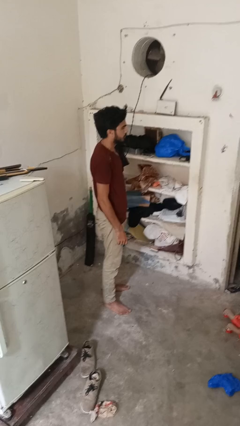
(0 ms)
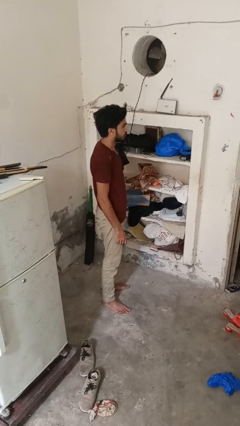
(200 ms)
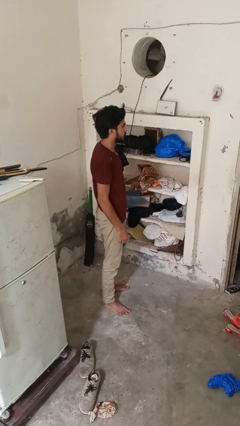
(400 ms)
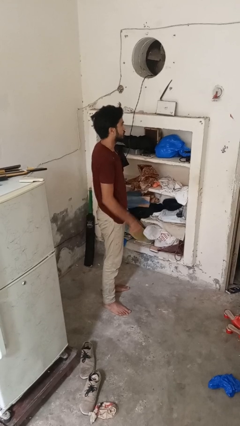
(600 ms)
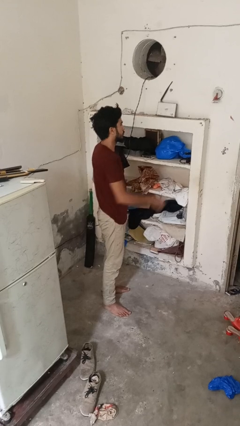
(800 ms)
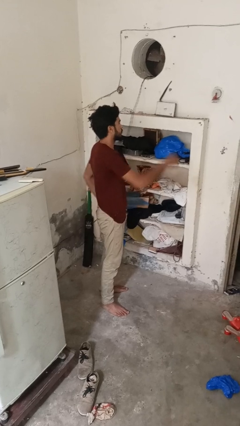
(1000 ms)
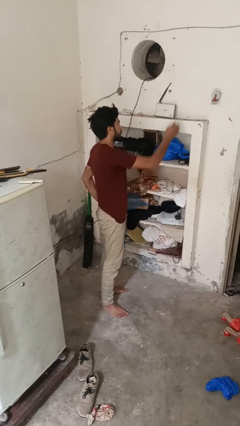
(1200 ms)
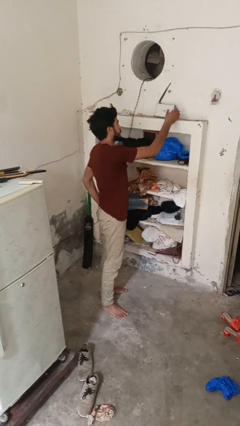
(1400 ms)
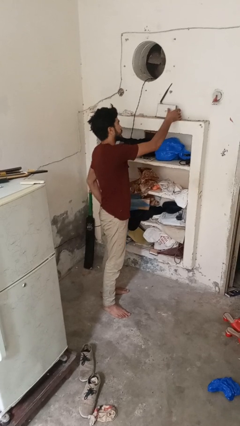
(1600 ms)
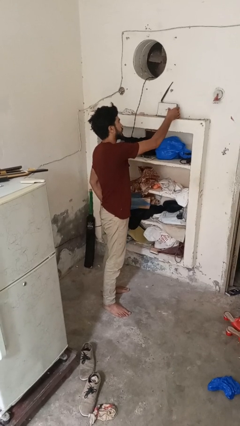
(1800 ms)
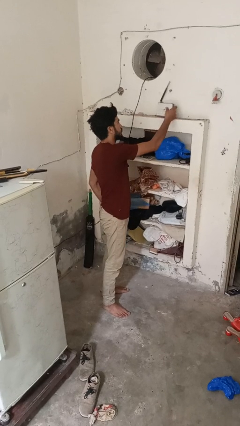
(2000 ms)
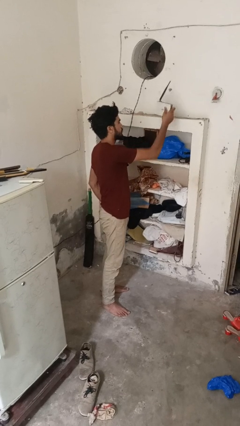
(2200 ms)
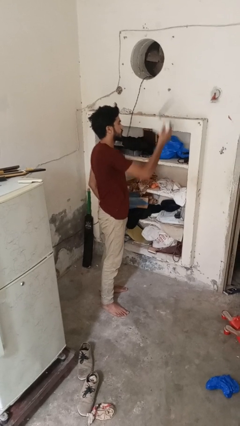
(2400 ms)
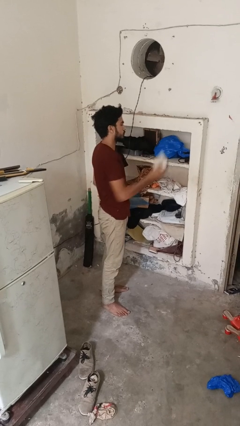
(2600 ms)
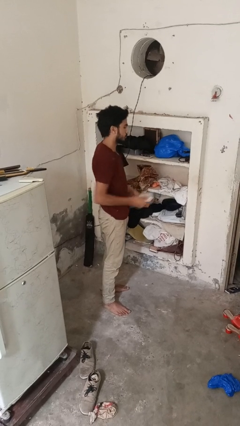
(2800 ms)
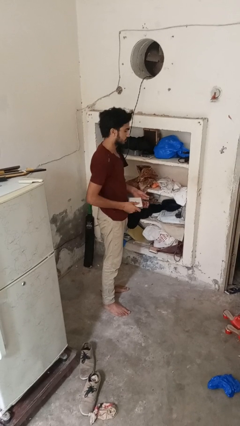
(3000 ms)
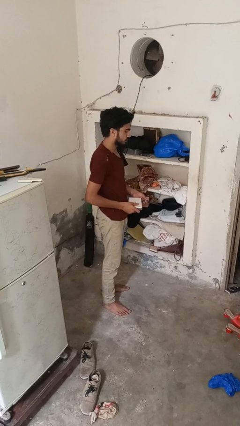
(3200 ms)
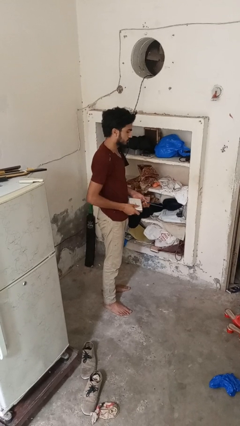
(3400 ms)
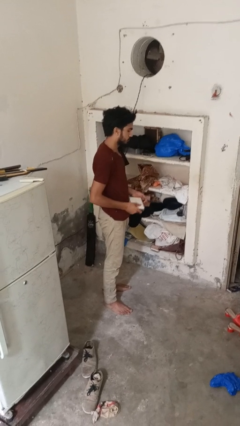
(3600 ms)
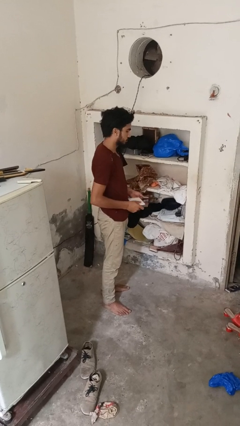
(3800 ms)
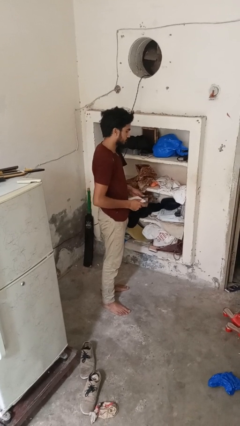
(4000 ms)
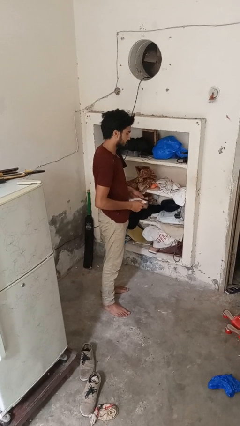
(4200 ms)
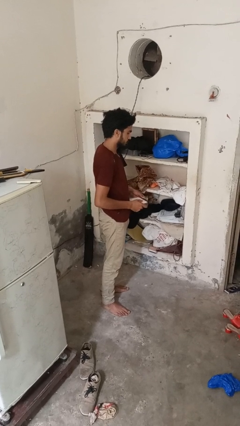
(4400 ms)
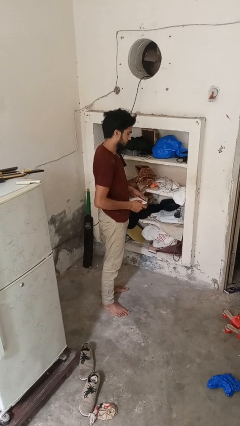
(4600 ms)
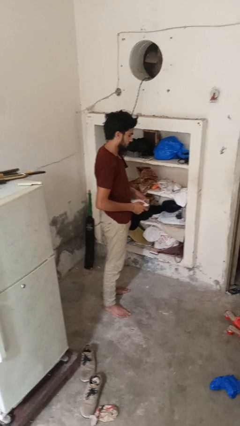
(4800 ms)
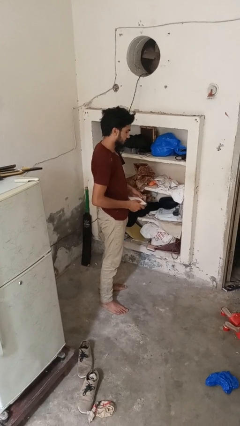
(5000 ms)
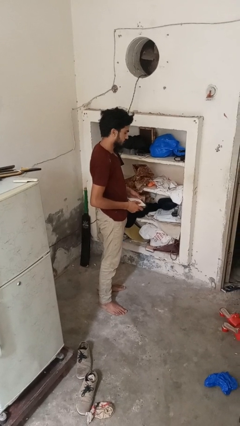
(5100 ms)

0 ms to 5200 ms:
person picks up object from shelf

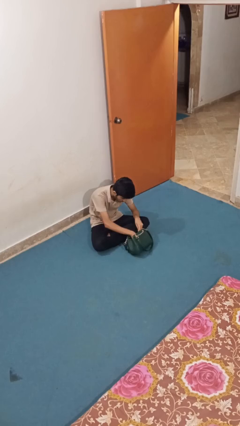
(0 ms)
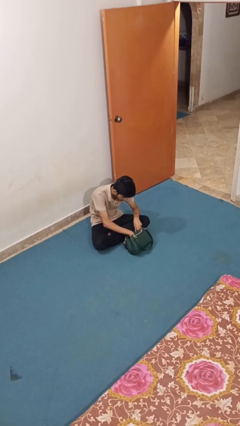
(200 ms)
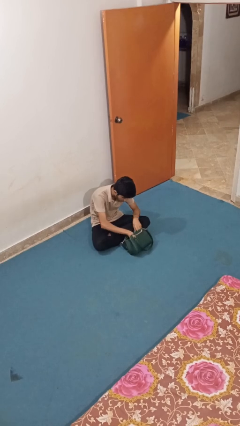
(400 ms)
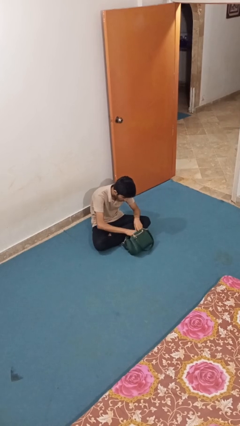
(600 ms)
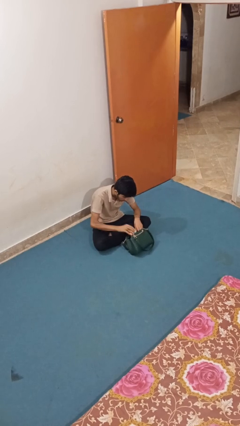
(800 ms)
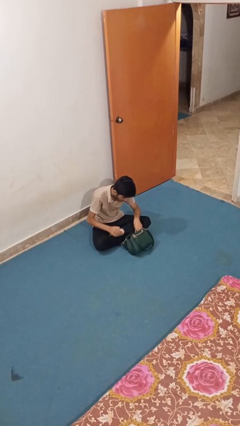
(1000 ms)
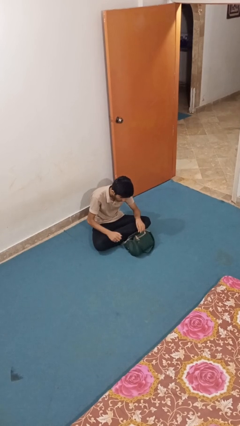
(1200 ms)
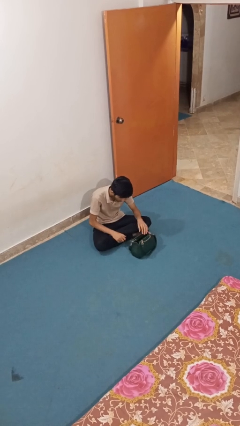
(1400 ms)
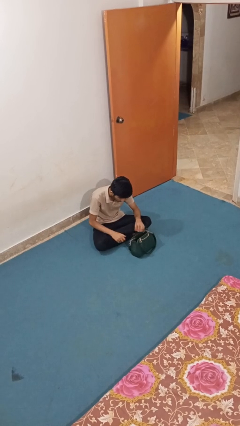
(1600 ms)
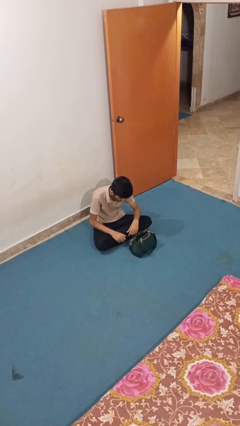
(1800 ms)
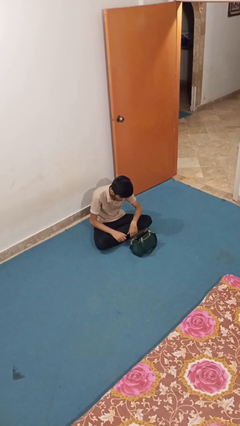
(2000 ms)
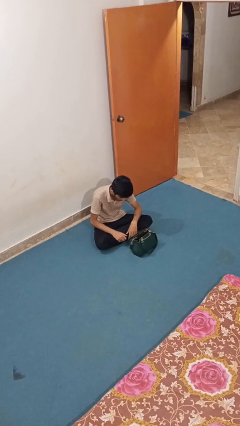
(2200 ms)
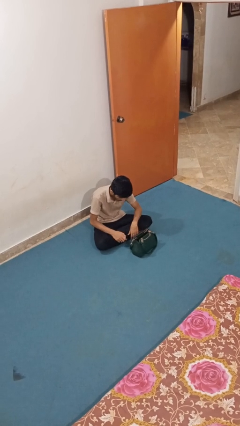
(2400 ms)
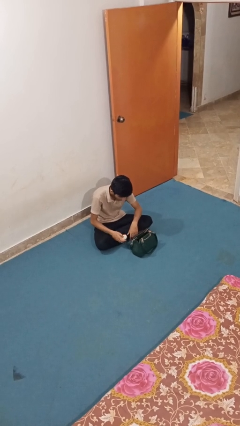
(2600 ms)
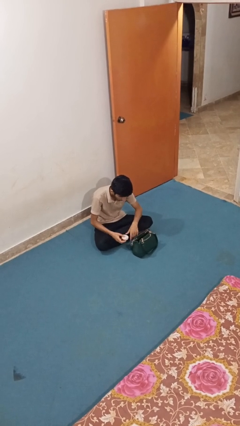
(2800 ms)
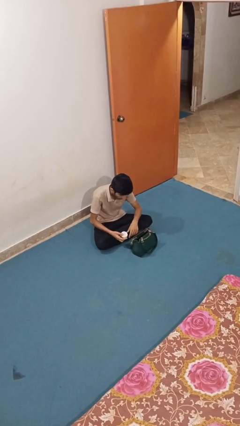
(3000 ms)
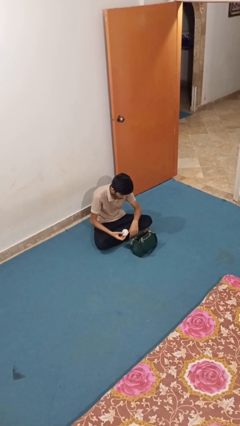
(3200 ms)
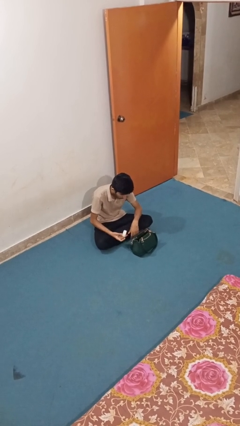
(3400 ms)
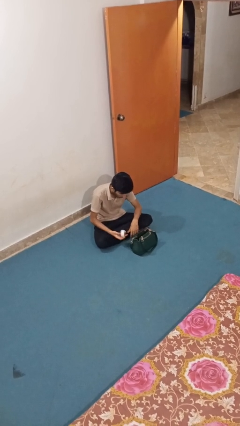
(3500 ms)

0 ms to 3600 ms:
person takes object from purse

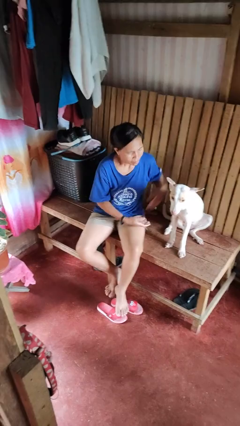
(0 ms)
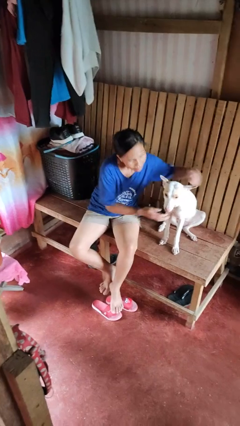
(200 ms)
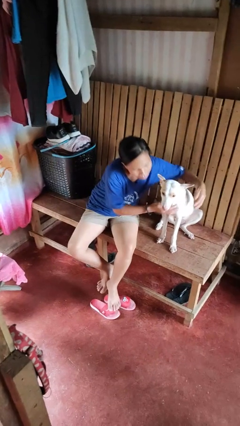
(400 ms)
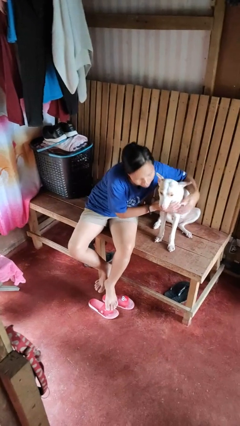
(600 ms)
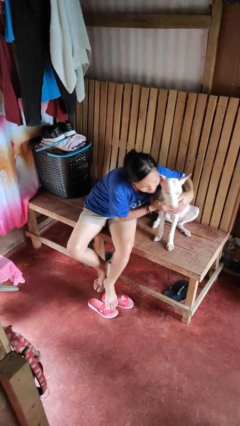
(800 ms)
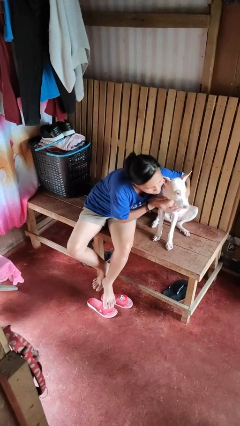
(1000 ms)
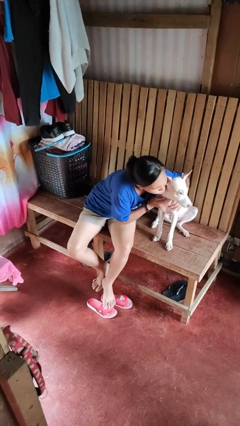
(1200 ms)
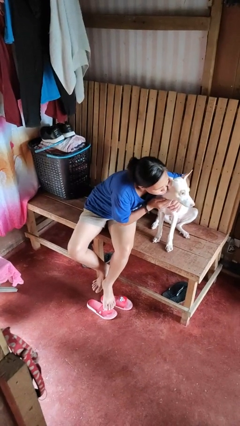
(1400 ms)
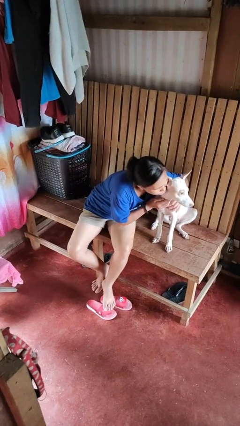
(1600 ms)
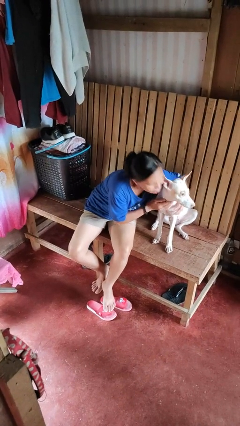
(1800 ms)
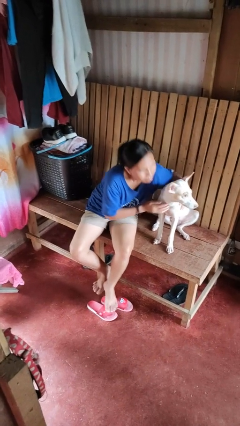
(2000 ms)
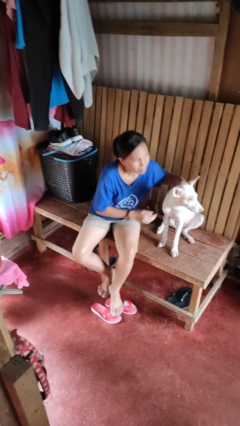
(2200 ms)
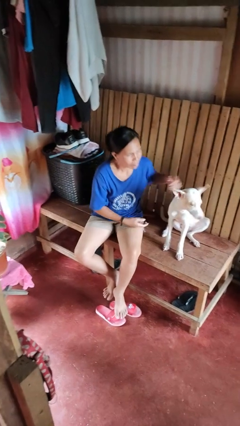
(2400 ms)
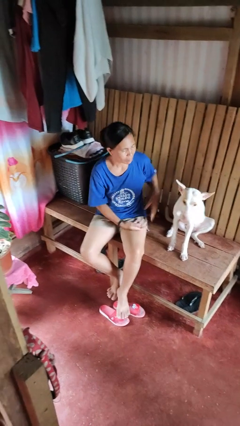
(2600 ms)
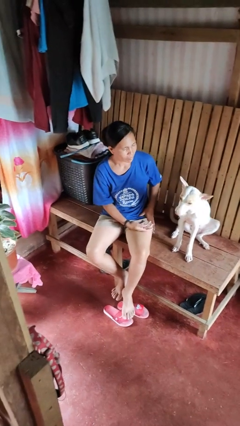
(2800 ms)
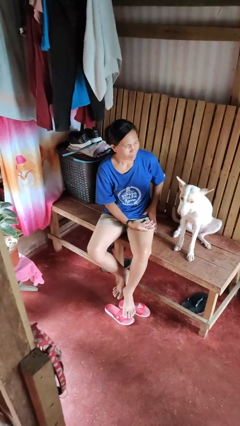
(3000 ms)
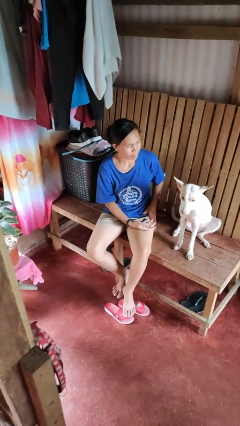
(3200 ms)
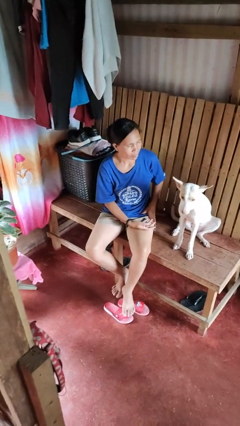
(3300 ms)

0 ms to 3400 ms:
person hugs dog

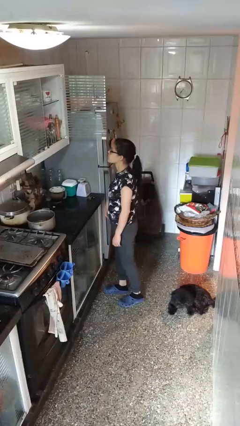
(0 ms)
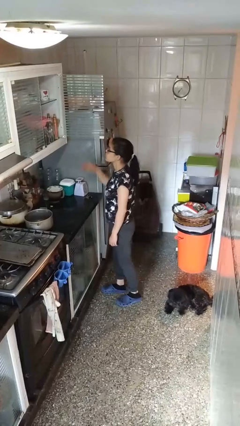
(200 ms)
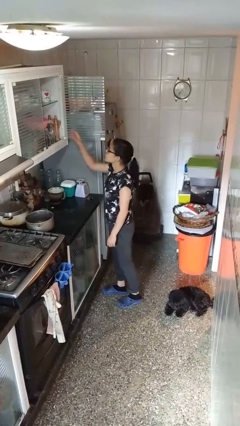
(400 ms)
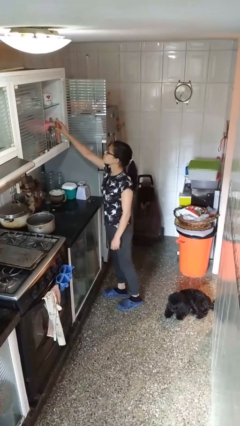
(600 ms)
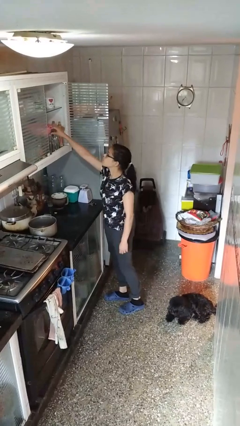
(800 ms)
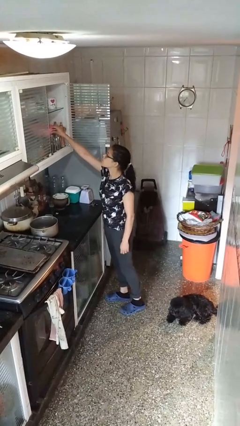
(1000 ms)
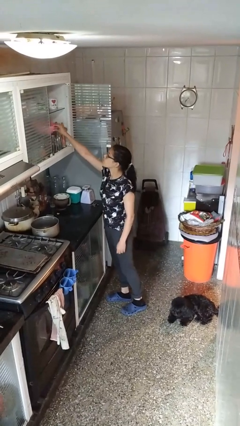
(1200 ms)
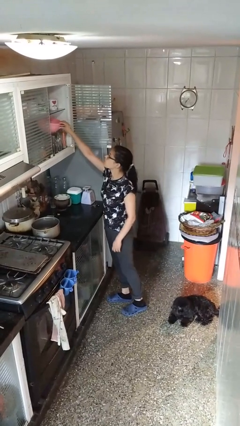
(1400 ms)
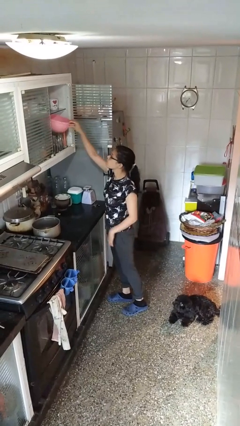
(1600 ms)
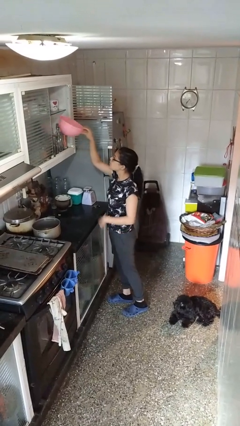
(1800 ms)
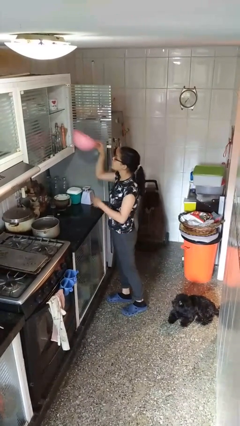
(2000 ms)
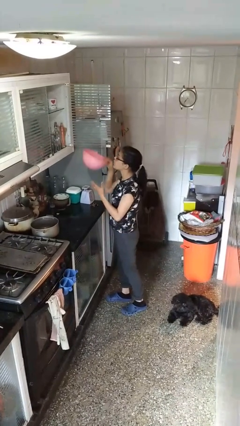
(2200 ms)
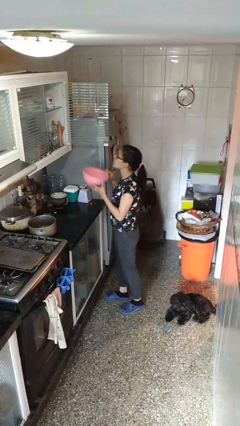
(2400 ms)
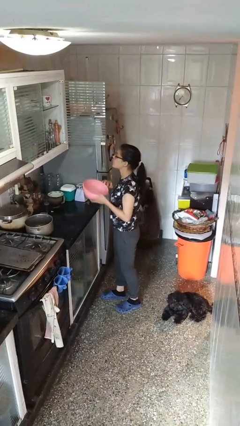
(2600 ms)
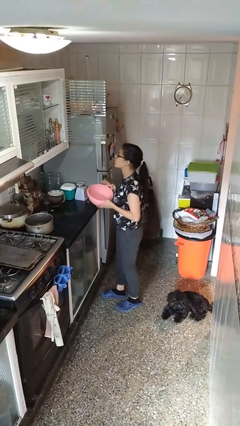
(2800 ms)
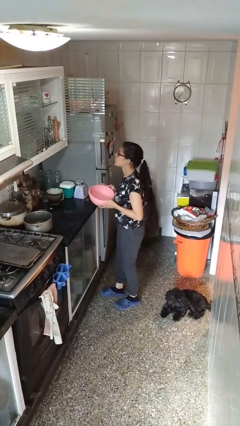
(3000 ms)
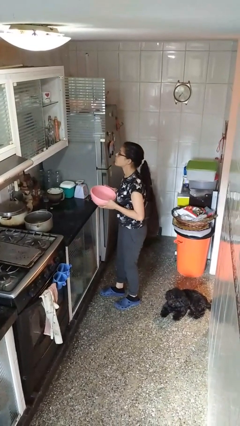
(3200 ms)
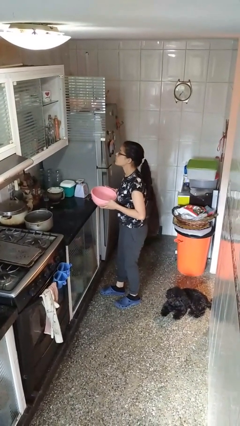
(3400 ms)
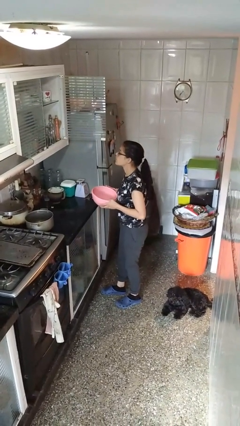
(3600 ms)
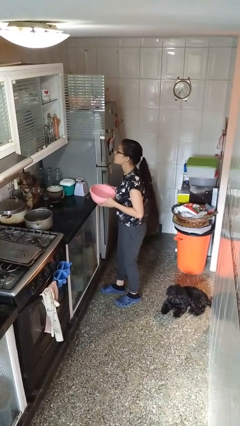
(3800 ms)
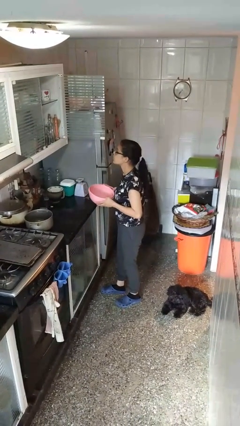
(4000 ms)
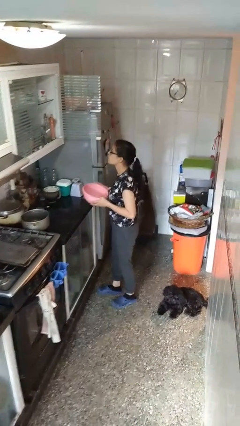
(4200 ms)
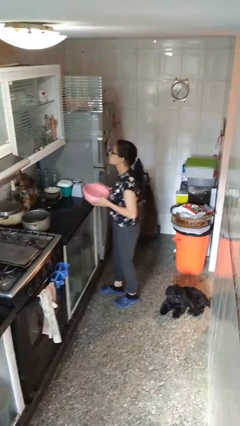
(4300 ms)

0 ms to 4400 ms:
person picks up object from cabinet

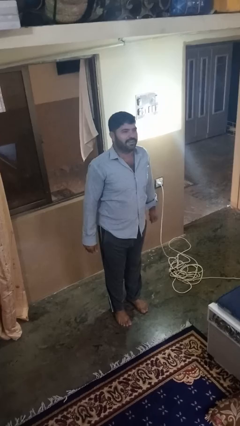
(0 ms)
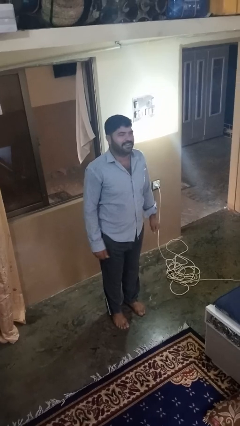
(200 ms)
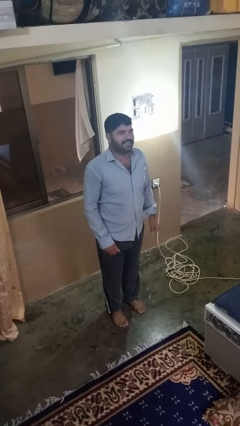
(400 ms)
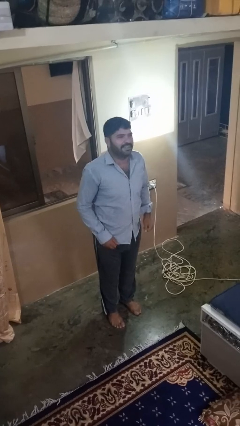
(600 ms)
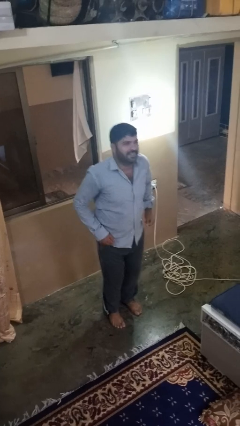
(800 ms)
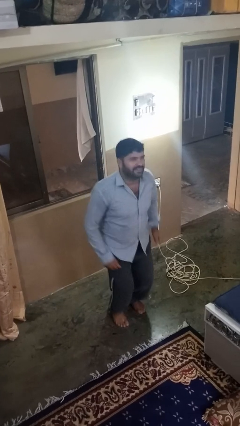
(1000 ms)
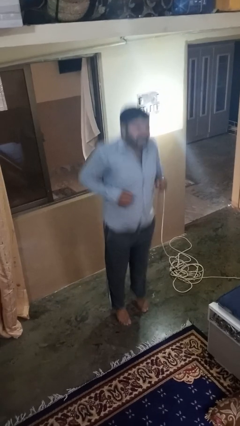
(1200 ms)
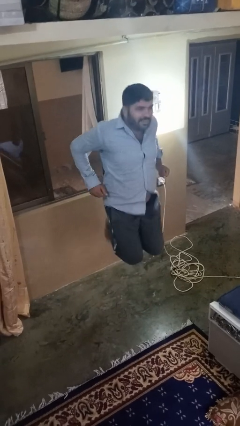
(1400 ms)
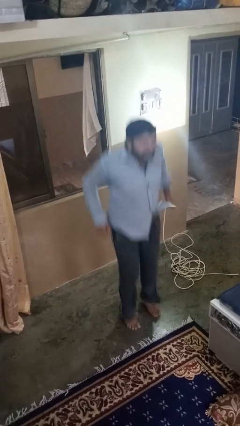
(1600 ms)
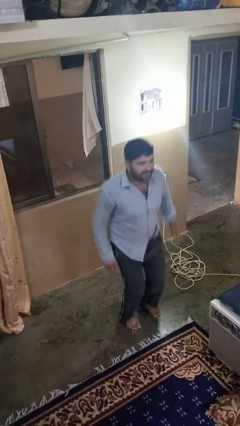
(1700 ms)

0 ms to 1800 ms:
person jumps
